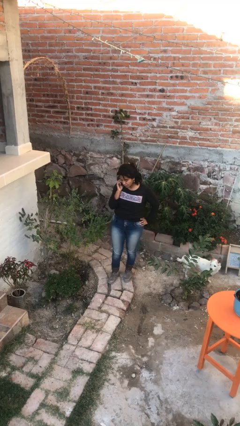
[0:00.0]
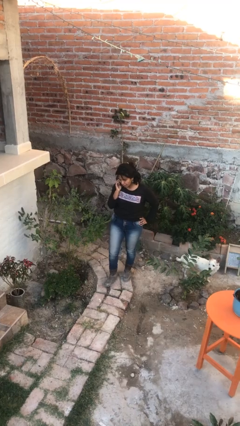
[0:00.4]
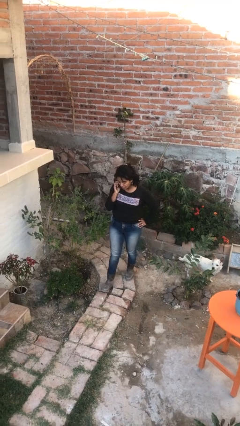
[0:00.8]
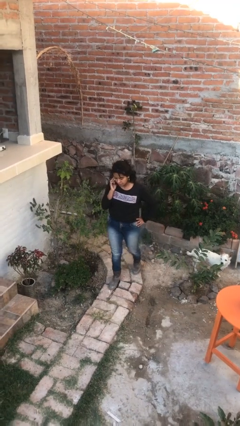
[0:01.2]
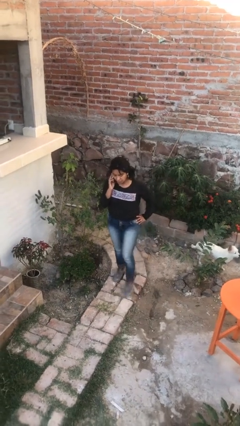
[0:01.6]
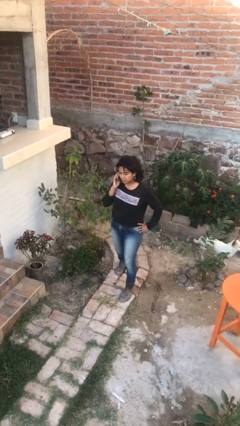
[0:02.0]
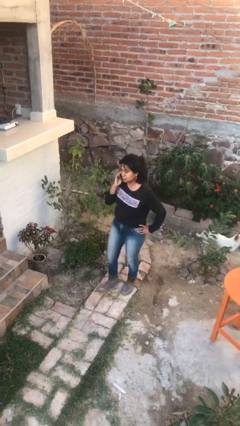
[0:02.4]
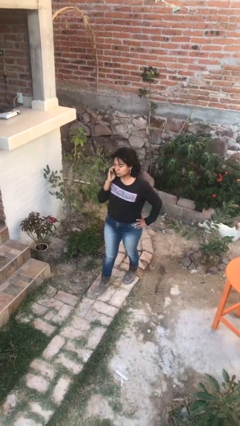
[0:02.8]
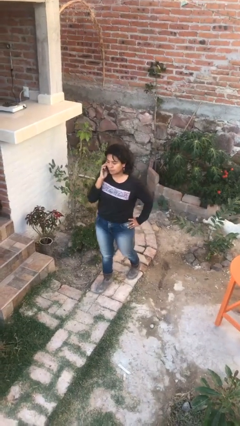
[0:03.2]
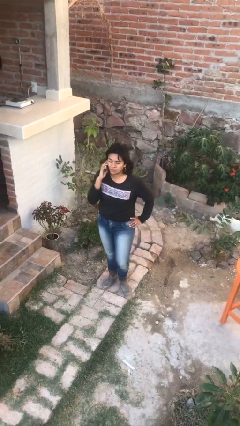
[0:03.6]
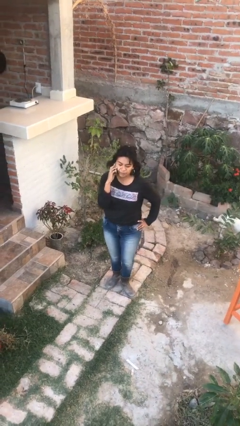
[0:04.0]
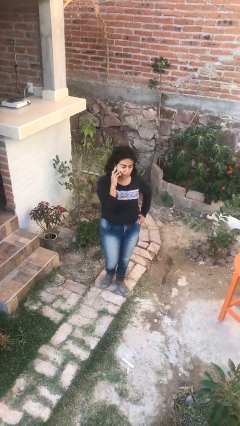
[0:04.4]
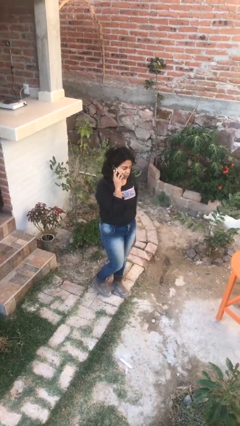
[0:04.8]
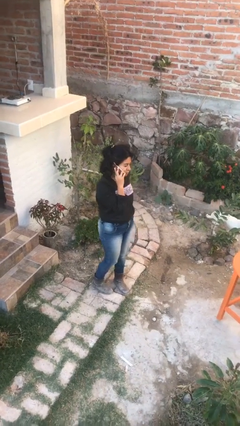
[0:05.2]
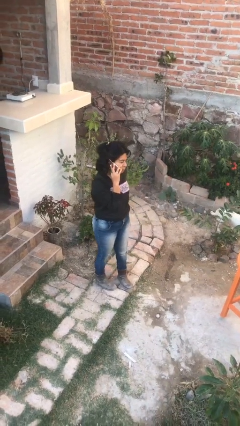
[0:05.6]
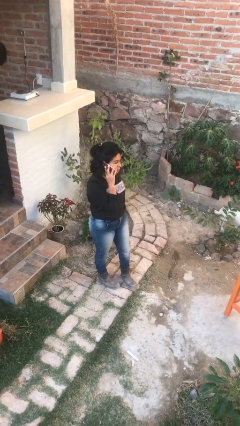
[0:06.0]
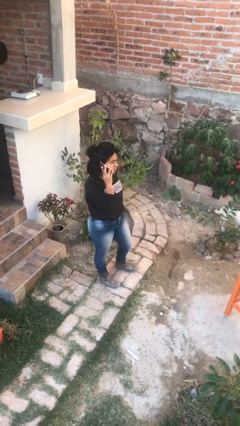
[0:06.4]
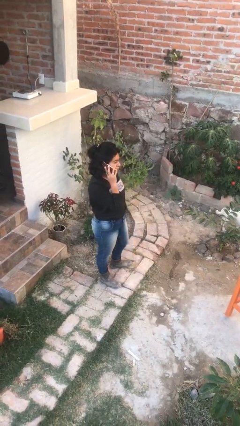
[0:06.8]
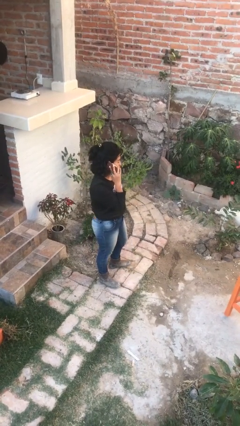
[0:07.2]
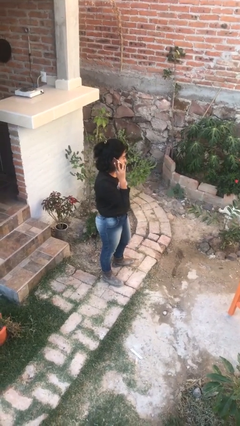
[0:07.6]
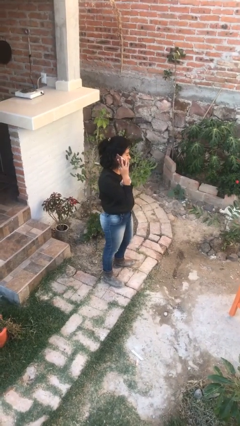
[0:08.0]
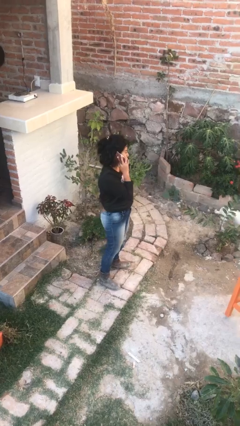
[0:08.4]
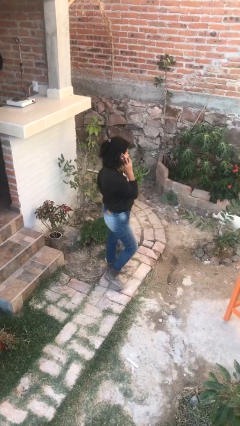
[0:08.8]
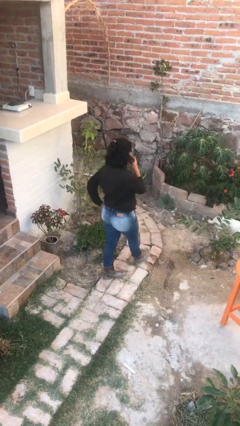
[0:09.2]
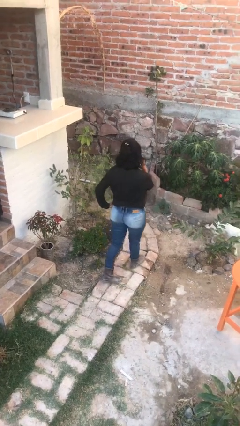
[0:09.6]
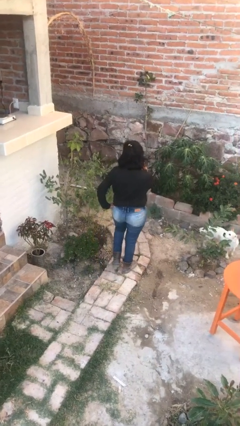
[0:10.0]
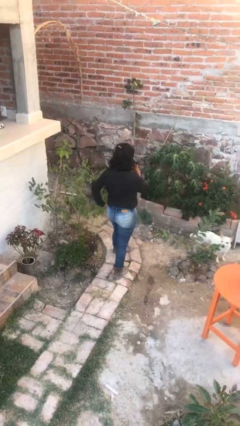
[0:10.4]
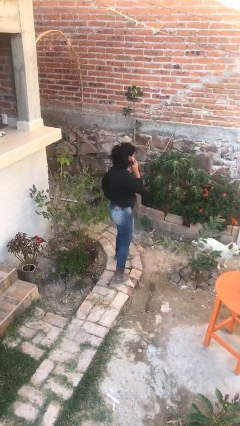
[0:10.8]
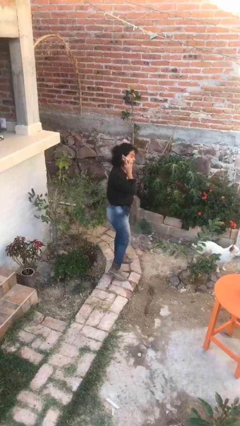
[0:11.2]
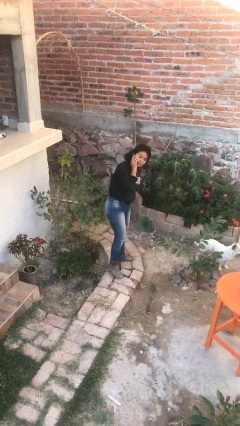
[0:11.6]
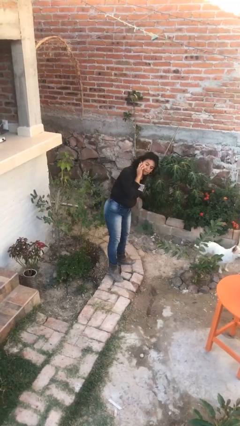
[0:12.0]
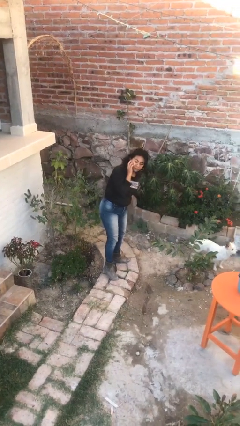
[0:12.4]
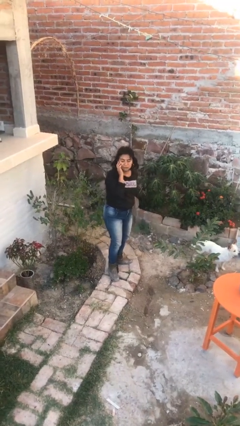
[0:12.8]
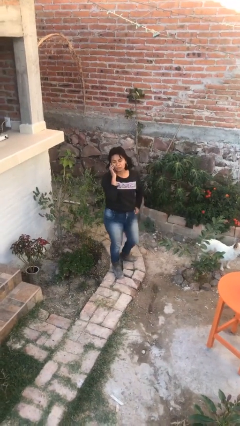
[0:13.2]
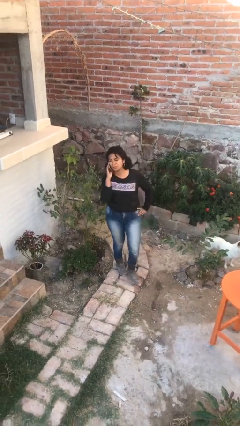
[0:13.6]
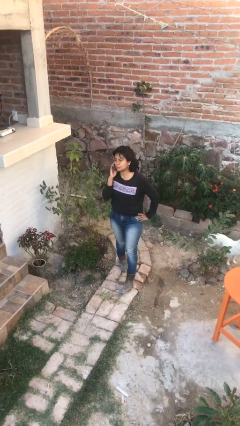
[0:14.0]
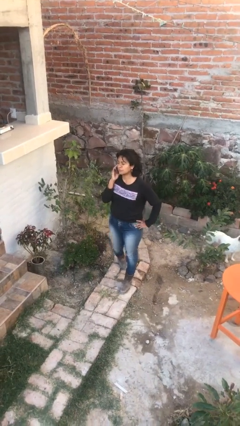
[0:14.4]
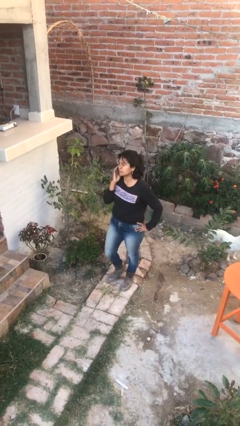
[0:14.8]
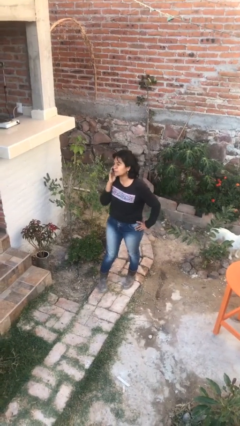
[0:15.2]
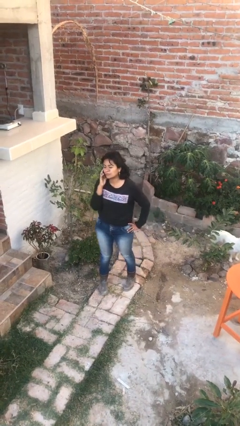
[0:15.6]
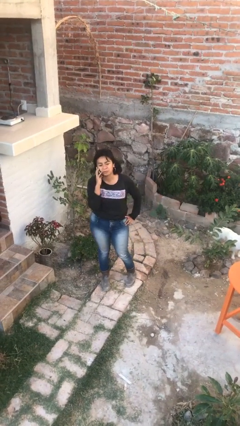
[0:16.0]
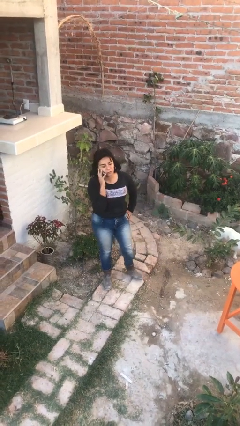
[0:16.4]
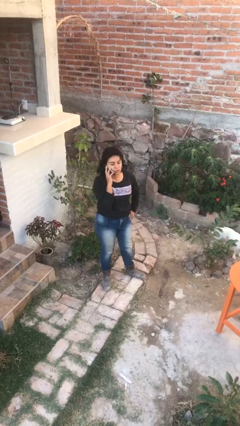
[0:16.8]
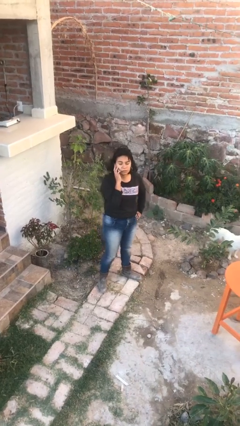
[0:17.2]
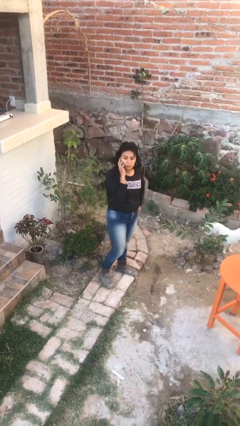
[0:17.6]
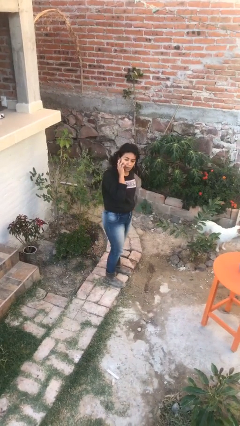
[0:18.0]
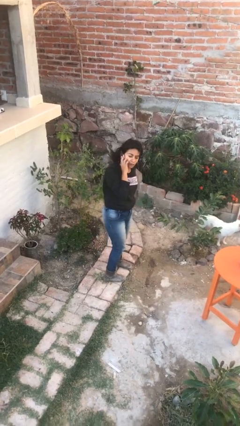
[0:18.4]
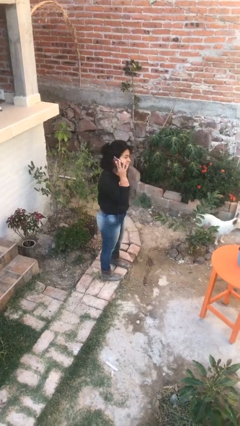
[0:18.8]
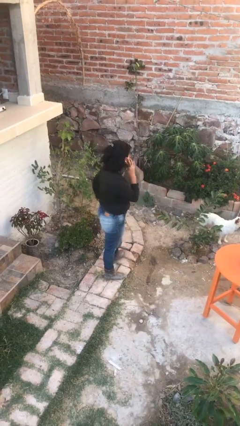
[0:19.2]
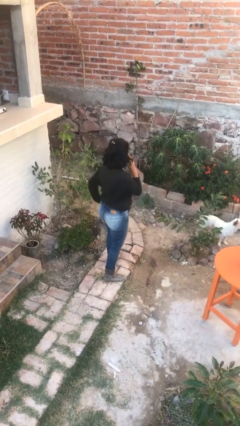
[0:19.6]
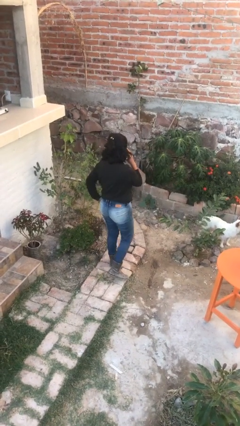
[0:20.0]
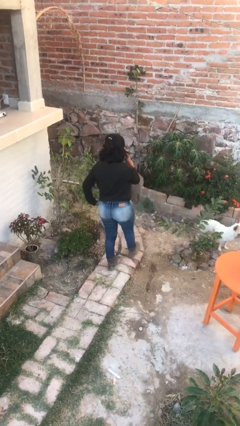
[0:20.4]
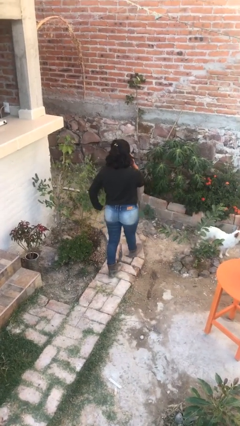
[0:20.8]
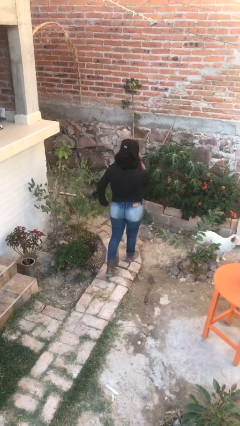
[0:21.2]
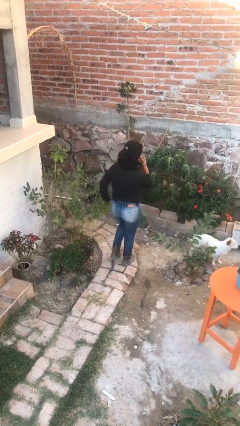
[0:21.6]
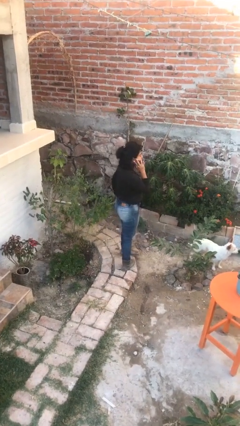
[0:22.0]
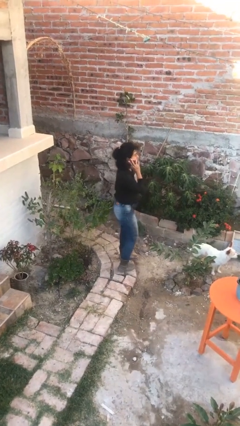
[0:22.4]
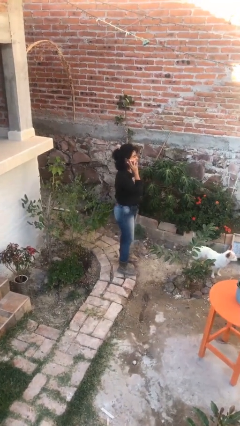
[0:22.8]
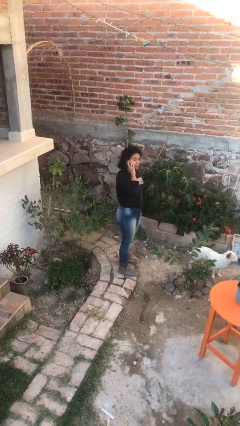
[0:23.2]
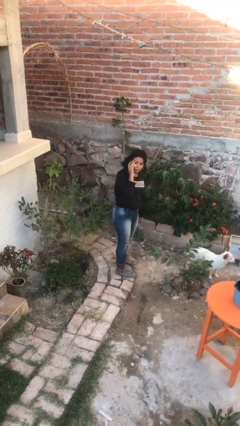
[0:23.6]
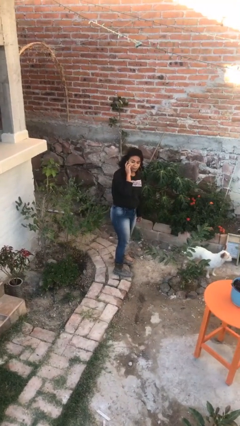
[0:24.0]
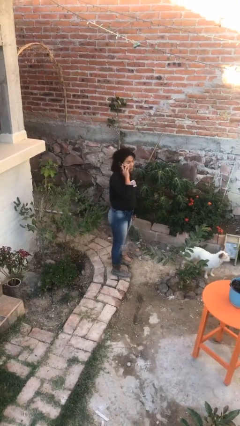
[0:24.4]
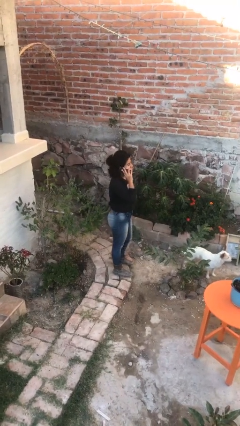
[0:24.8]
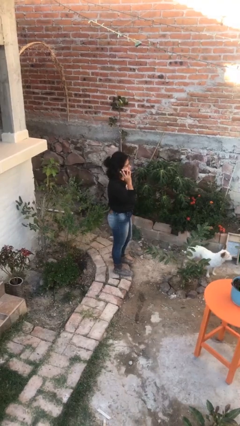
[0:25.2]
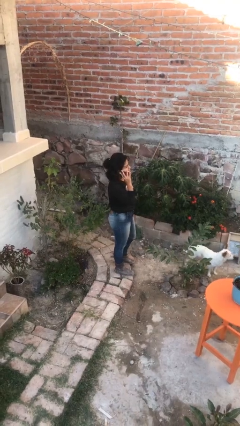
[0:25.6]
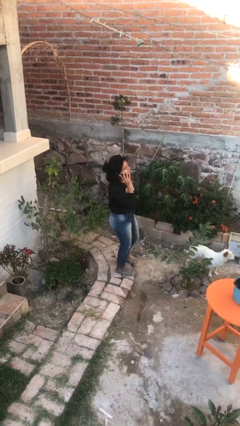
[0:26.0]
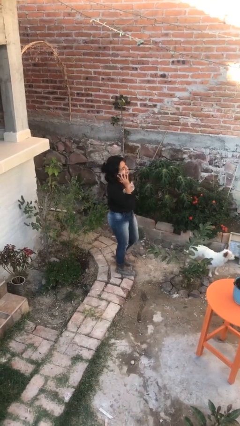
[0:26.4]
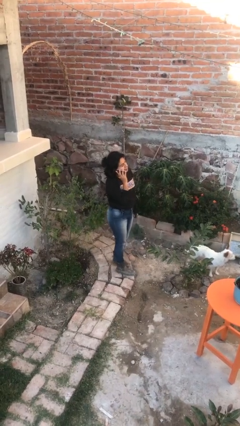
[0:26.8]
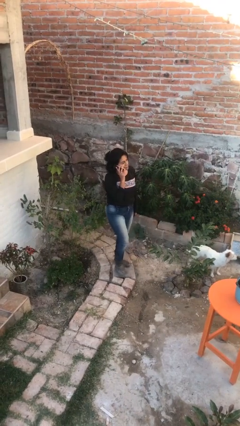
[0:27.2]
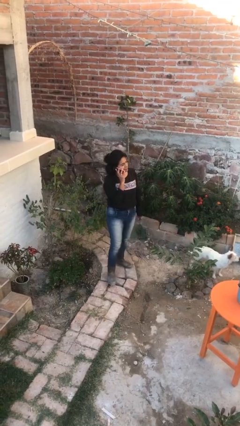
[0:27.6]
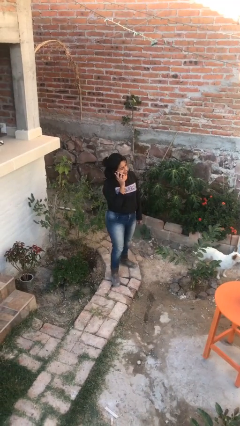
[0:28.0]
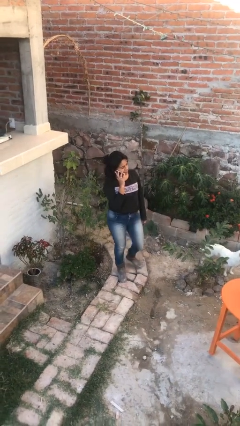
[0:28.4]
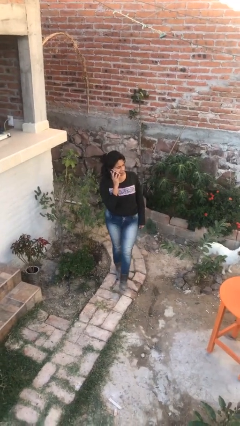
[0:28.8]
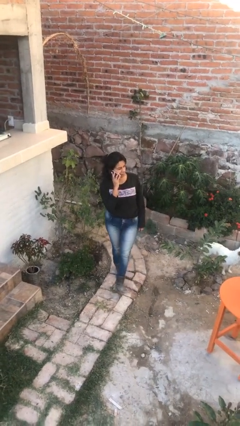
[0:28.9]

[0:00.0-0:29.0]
person walks

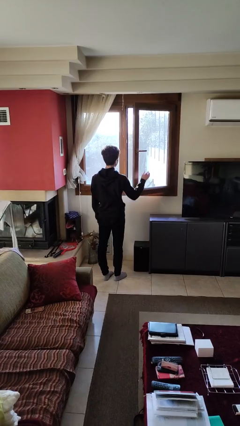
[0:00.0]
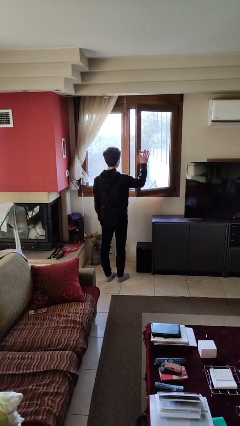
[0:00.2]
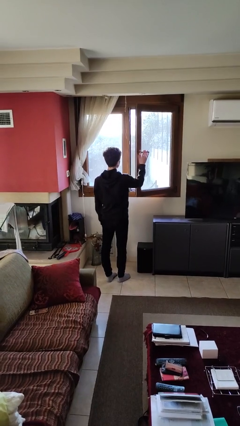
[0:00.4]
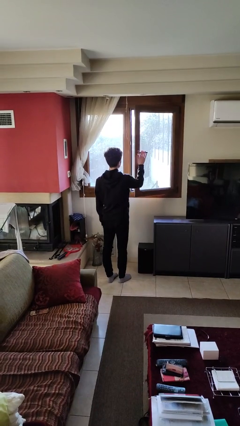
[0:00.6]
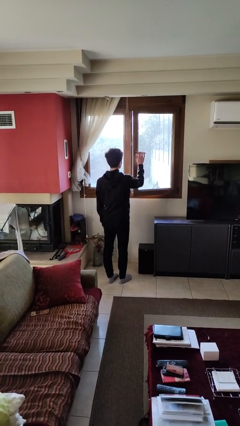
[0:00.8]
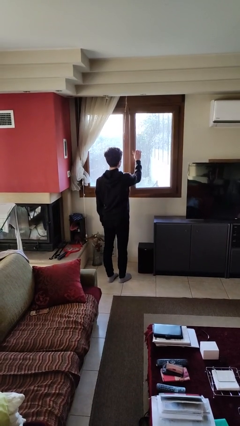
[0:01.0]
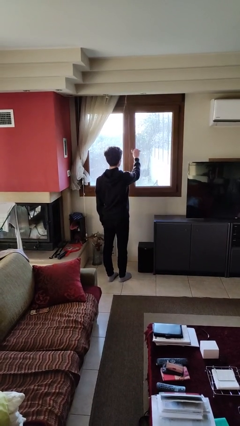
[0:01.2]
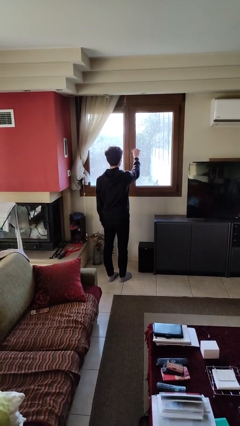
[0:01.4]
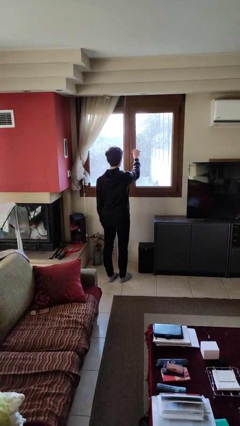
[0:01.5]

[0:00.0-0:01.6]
person closes home window

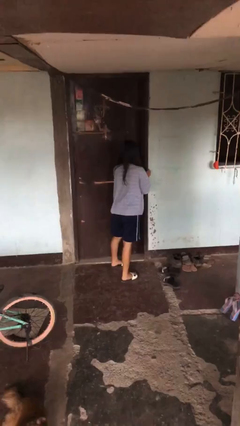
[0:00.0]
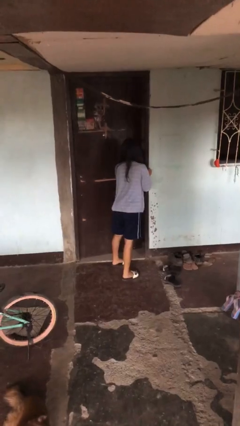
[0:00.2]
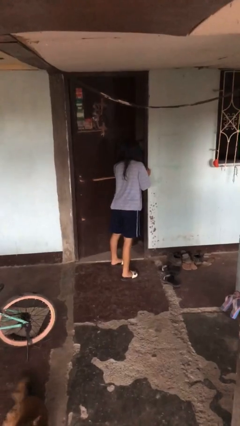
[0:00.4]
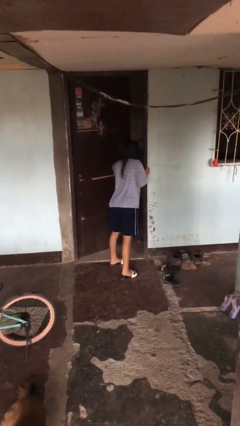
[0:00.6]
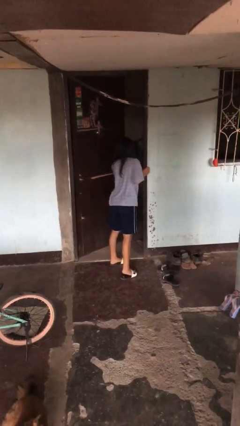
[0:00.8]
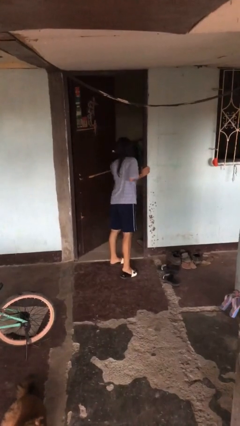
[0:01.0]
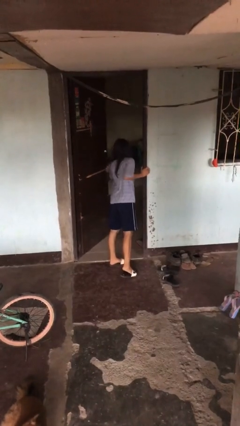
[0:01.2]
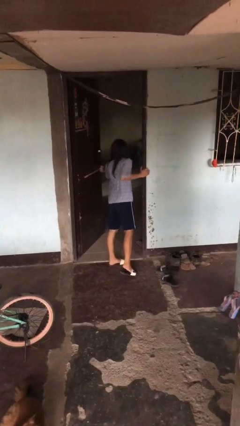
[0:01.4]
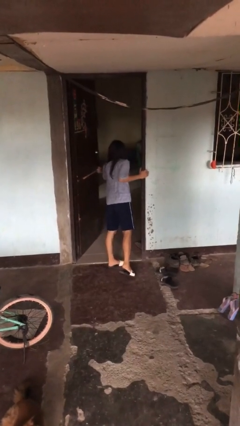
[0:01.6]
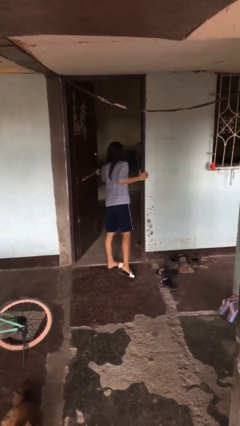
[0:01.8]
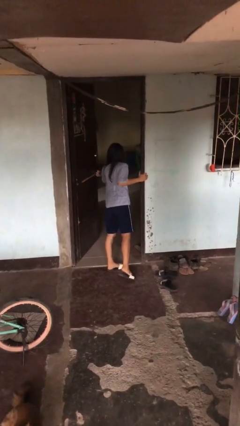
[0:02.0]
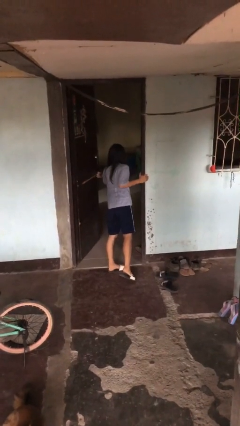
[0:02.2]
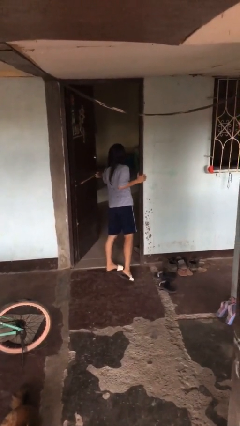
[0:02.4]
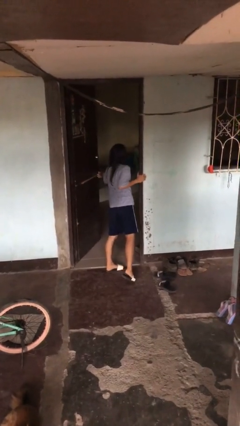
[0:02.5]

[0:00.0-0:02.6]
person opens facility door
